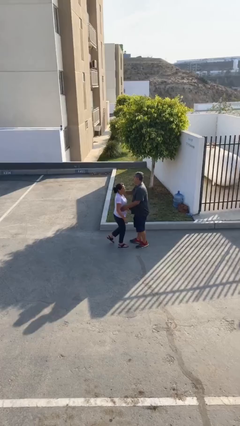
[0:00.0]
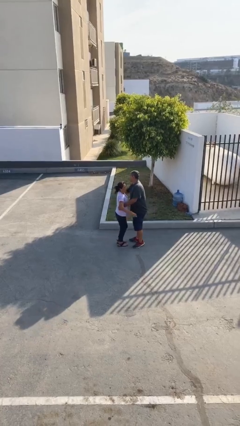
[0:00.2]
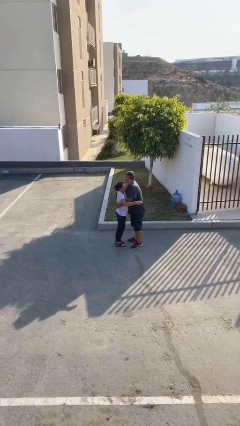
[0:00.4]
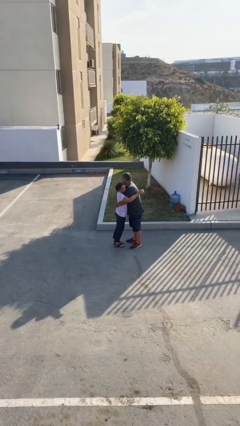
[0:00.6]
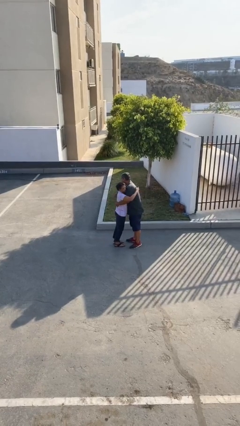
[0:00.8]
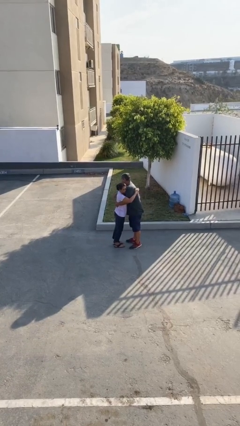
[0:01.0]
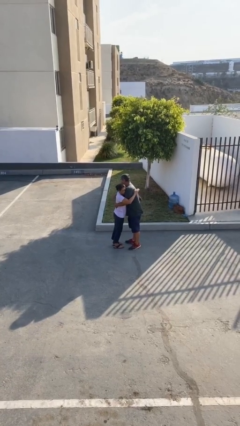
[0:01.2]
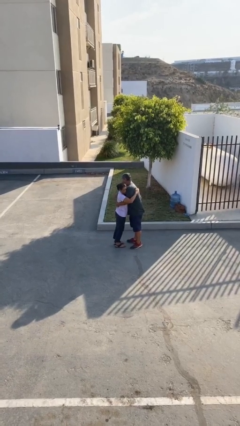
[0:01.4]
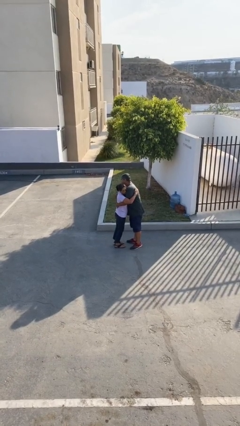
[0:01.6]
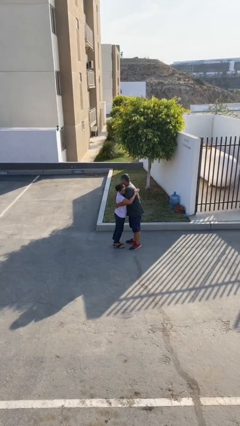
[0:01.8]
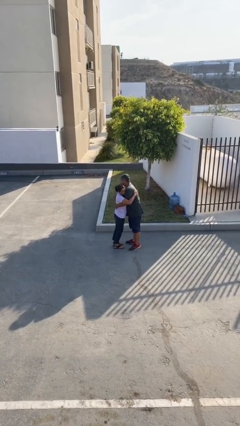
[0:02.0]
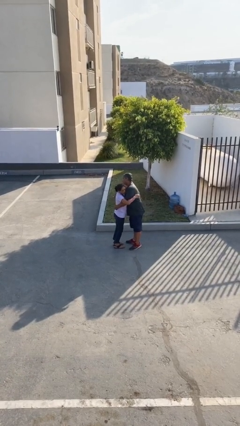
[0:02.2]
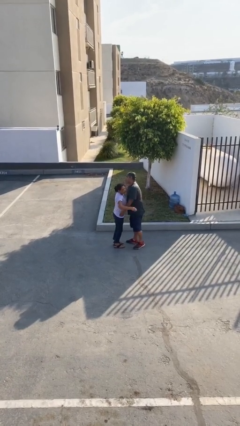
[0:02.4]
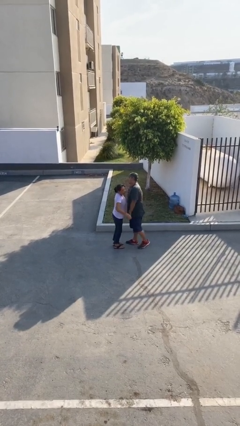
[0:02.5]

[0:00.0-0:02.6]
person embraces person

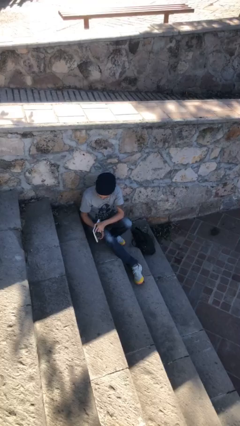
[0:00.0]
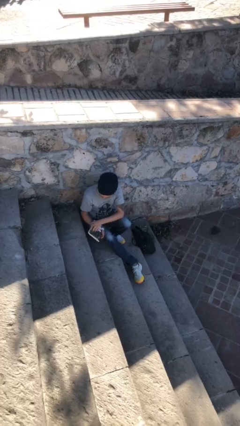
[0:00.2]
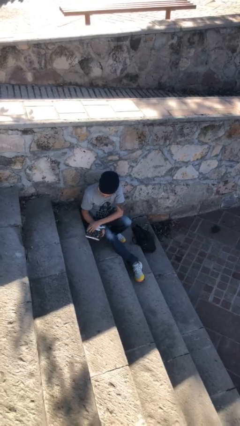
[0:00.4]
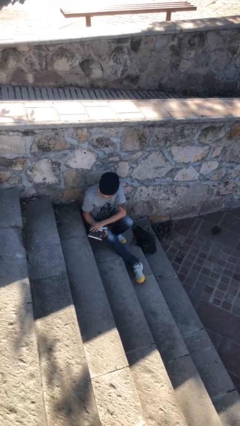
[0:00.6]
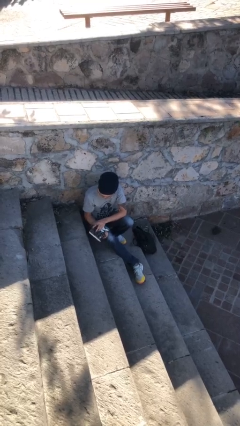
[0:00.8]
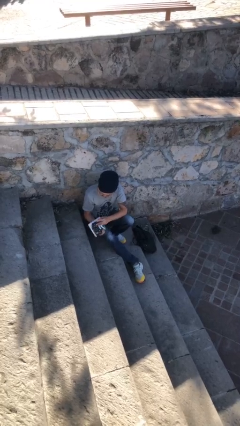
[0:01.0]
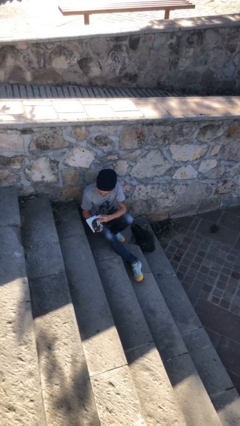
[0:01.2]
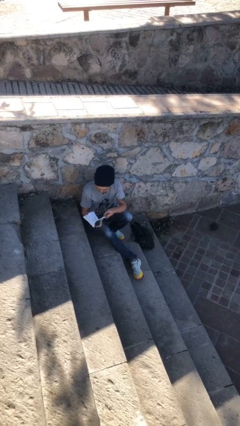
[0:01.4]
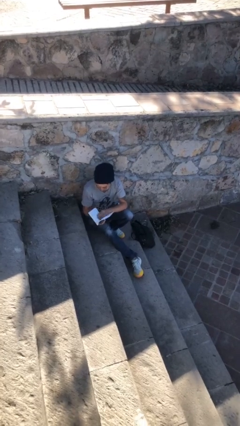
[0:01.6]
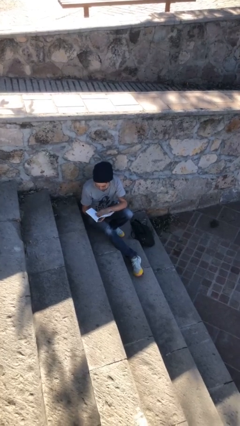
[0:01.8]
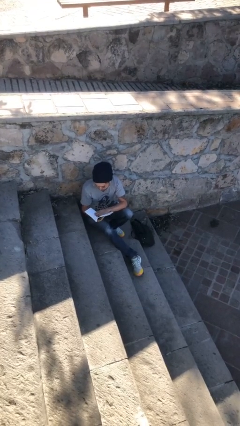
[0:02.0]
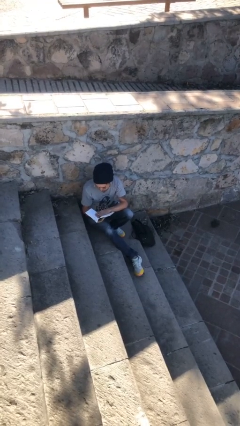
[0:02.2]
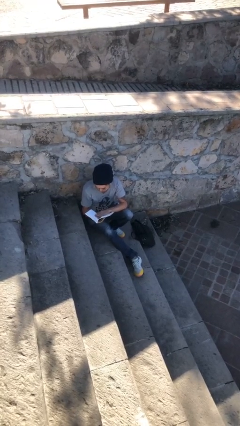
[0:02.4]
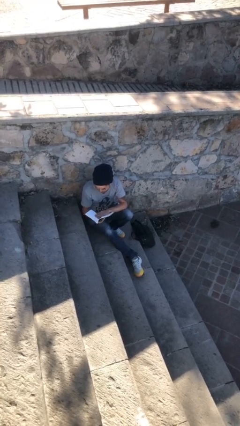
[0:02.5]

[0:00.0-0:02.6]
person reads document

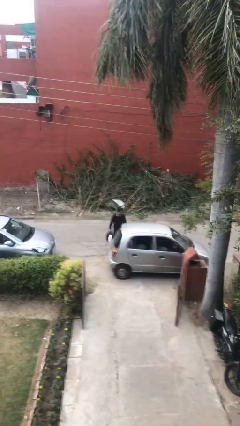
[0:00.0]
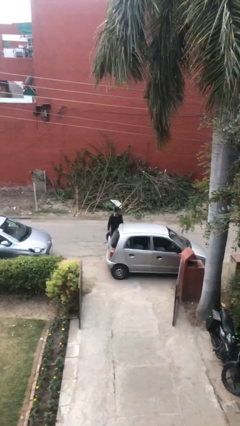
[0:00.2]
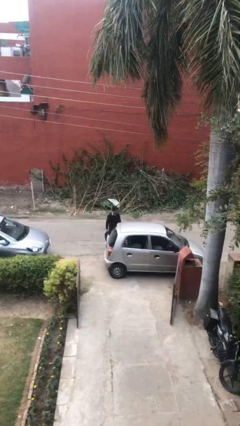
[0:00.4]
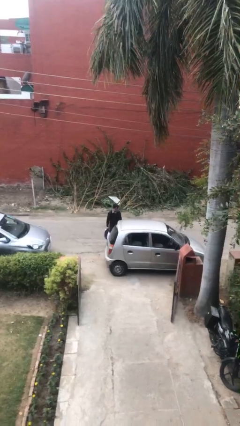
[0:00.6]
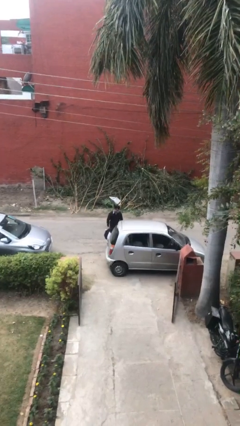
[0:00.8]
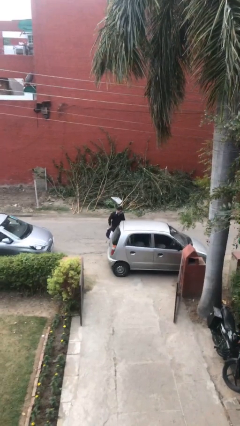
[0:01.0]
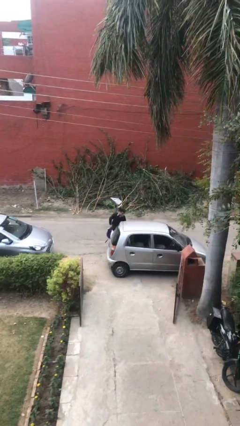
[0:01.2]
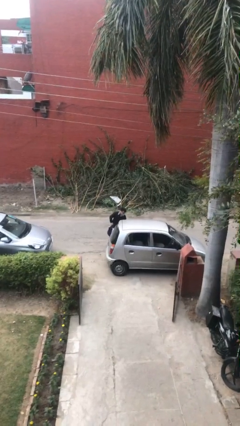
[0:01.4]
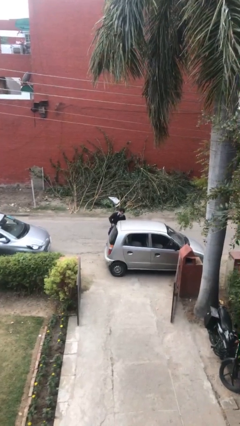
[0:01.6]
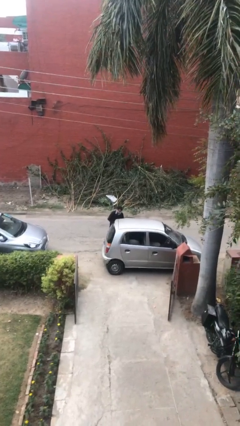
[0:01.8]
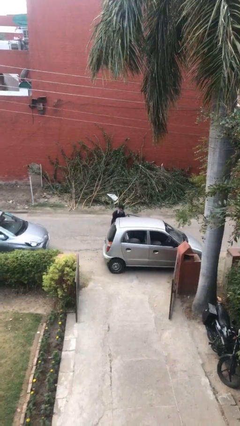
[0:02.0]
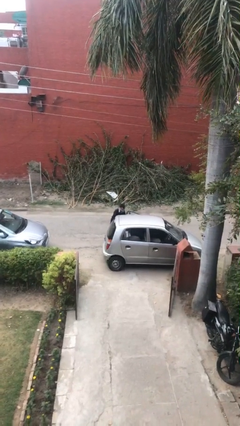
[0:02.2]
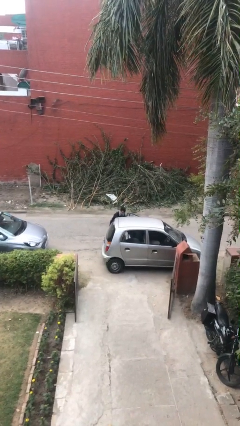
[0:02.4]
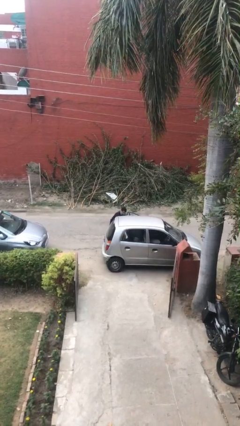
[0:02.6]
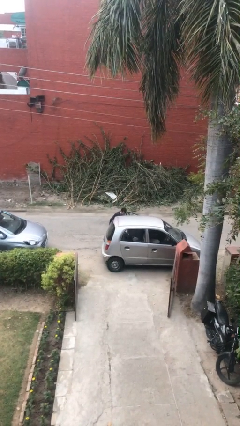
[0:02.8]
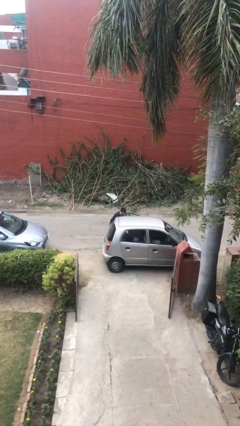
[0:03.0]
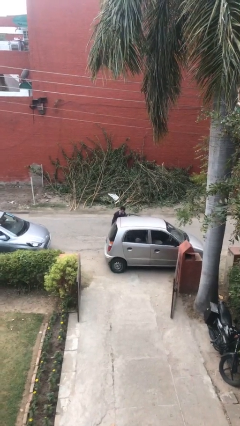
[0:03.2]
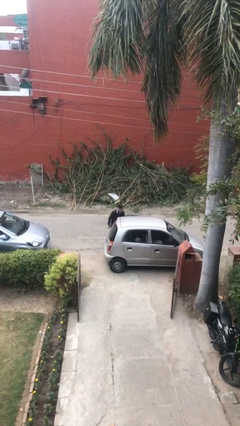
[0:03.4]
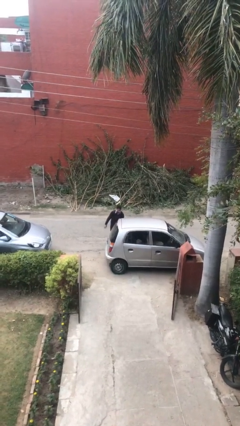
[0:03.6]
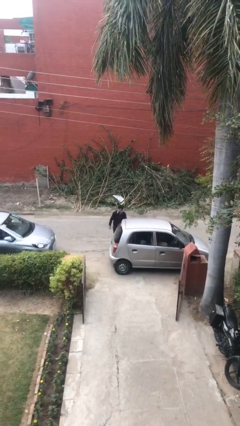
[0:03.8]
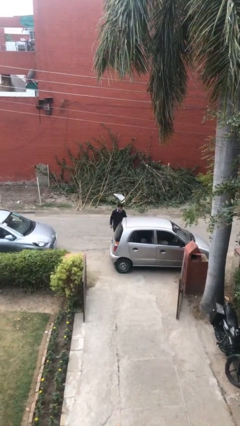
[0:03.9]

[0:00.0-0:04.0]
person loads car

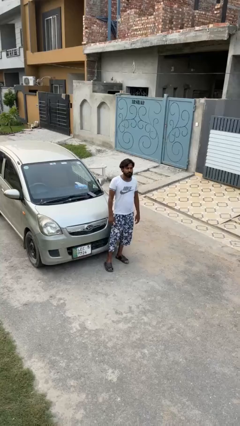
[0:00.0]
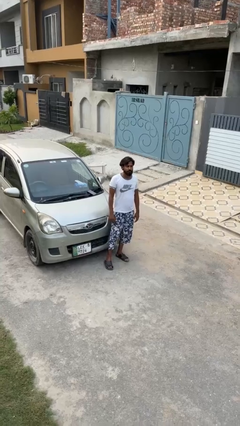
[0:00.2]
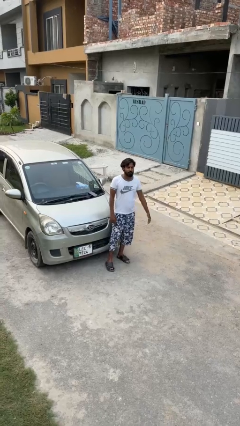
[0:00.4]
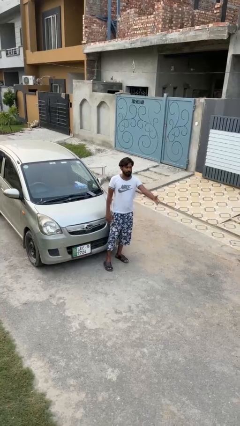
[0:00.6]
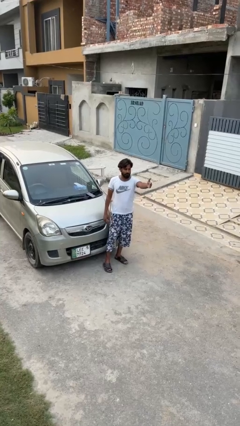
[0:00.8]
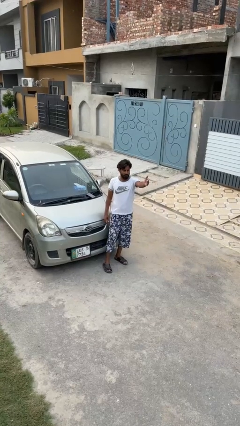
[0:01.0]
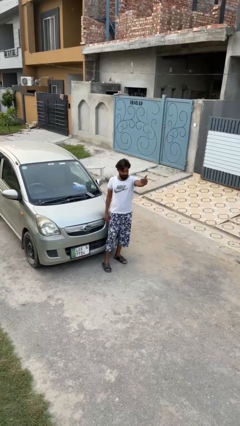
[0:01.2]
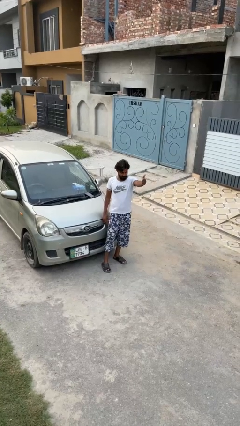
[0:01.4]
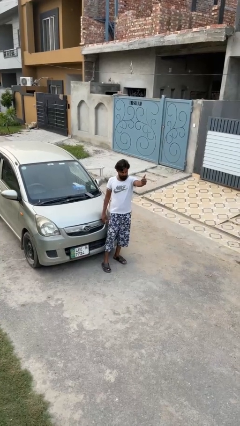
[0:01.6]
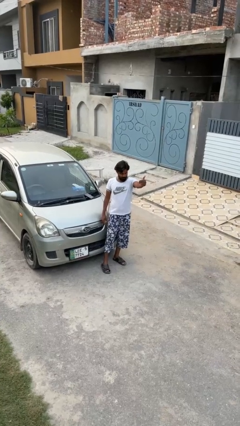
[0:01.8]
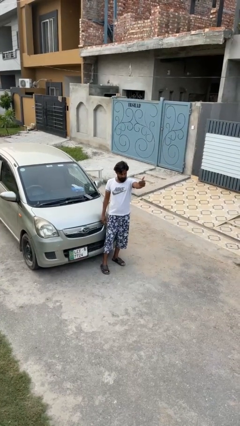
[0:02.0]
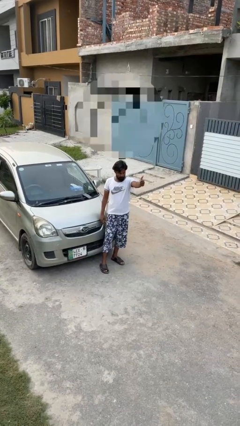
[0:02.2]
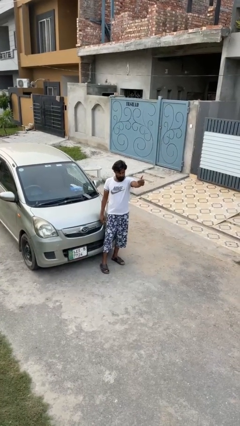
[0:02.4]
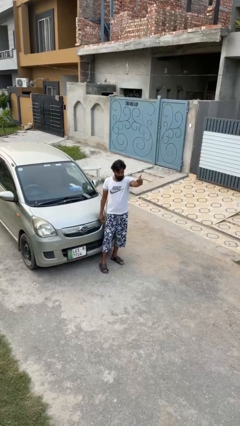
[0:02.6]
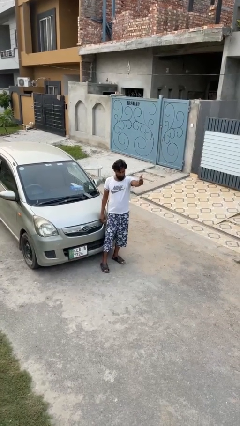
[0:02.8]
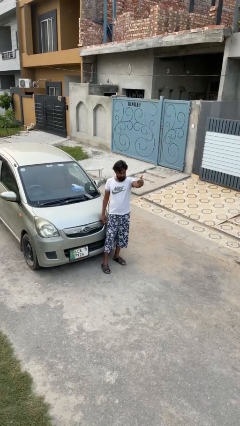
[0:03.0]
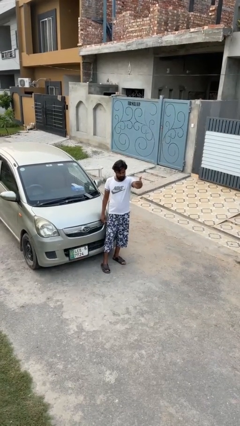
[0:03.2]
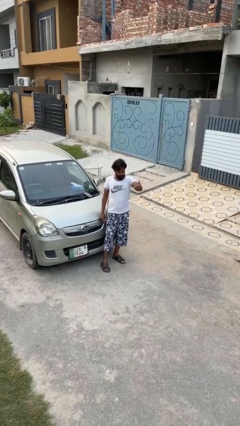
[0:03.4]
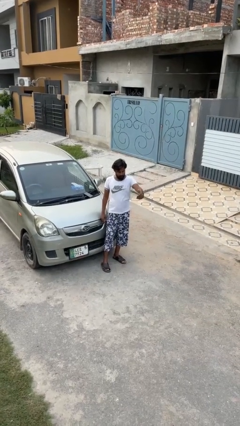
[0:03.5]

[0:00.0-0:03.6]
person gestures come here

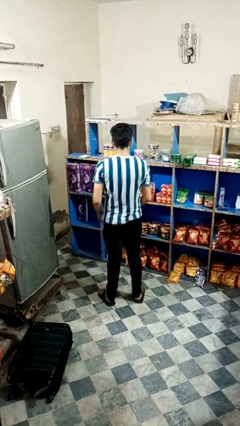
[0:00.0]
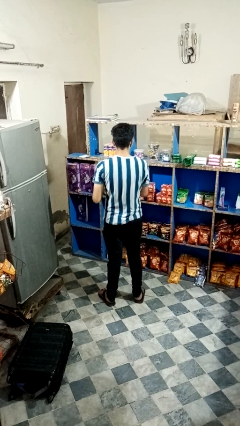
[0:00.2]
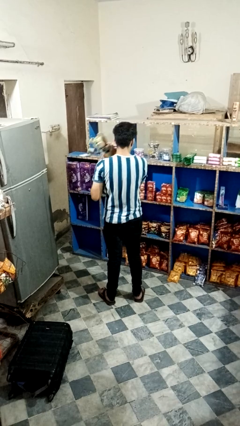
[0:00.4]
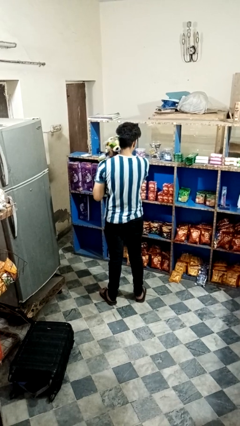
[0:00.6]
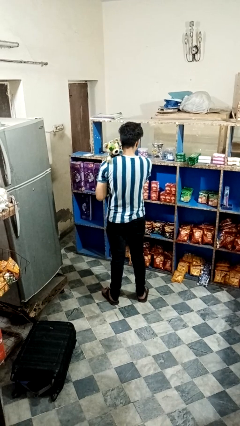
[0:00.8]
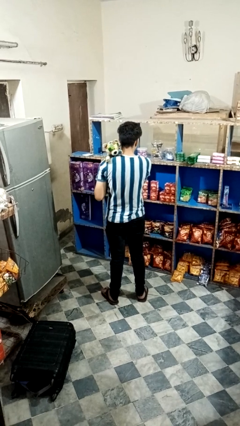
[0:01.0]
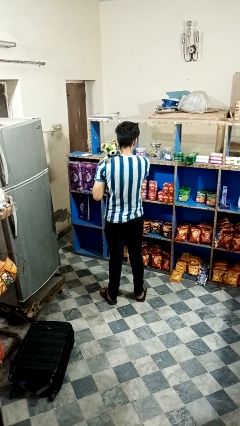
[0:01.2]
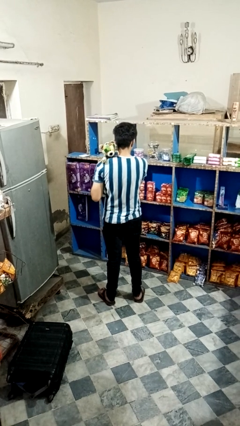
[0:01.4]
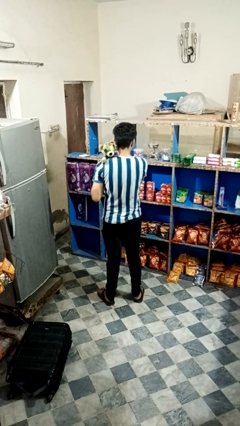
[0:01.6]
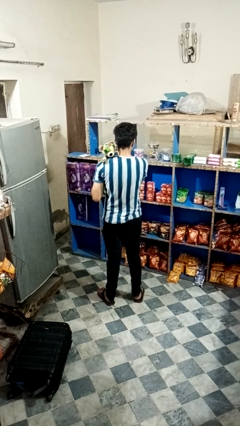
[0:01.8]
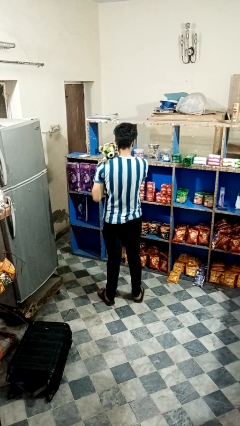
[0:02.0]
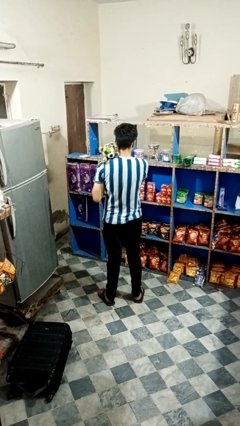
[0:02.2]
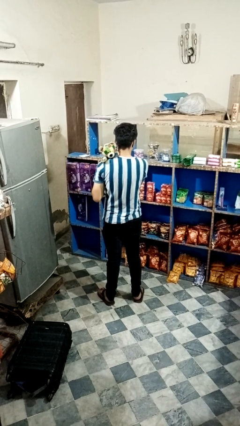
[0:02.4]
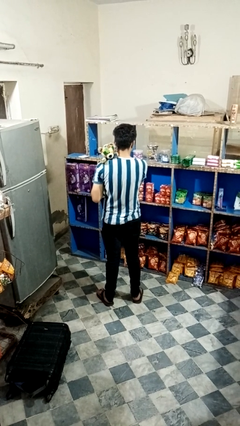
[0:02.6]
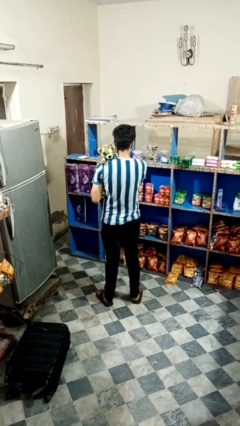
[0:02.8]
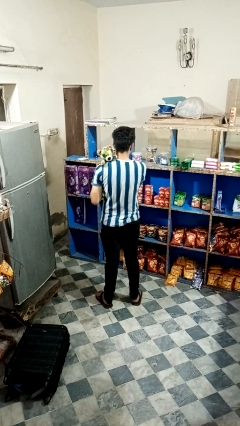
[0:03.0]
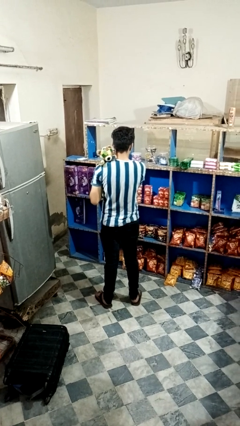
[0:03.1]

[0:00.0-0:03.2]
person hugs stuffed animal

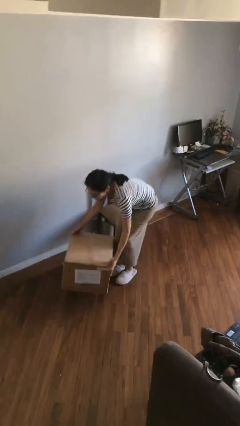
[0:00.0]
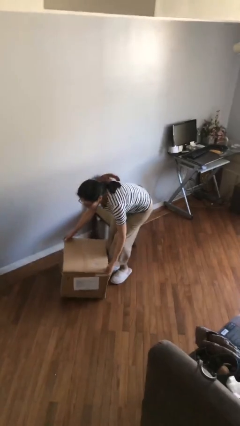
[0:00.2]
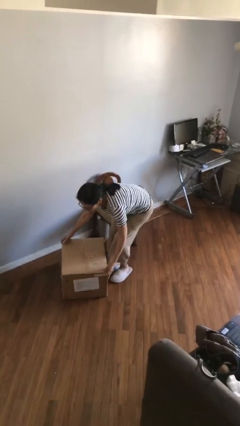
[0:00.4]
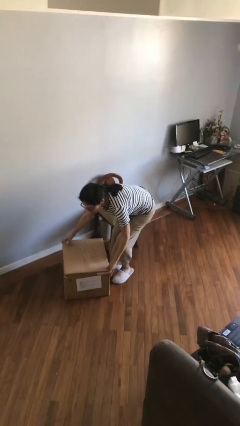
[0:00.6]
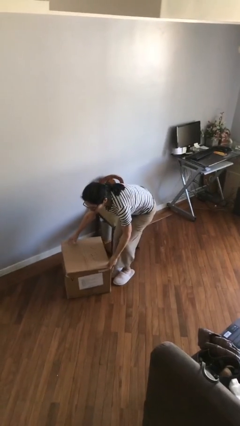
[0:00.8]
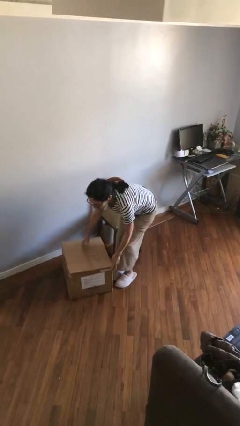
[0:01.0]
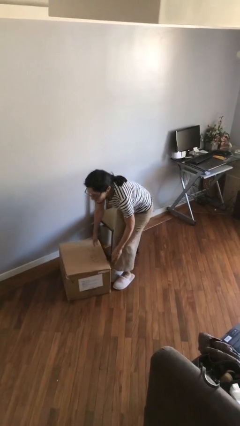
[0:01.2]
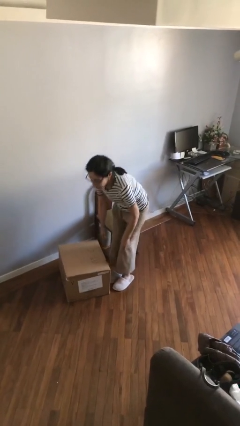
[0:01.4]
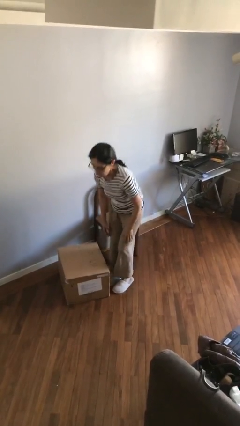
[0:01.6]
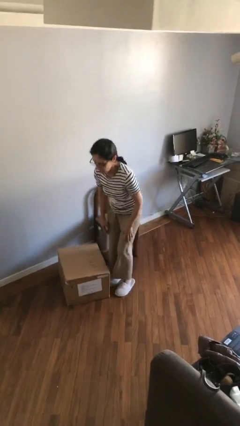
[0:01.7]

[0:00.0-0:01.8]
person puts down object on floor
